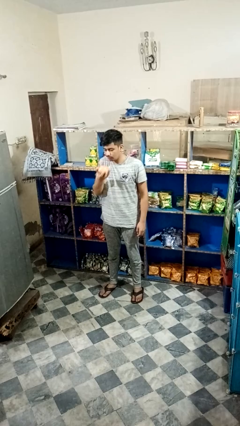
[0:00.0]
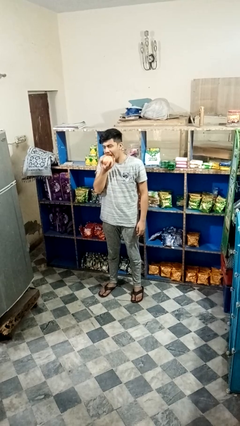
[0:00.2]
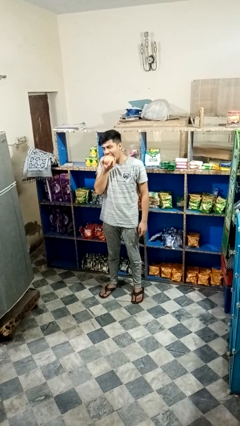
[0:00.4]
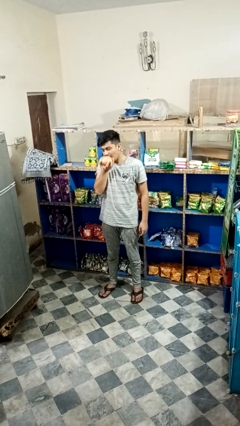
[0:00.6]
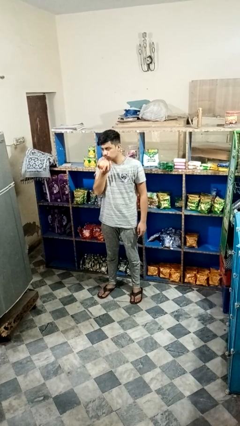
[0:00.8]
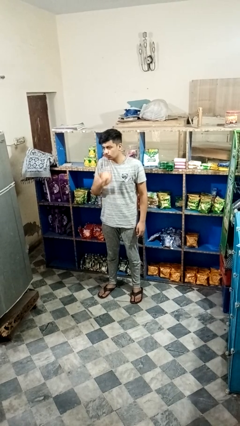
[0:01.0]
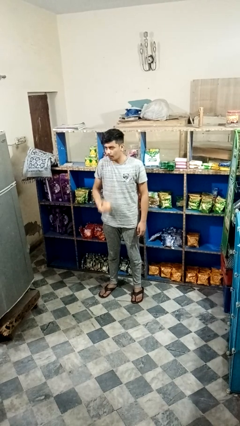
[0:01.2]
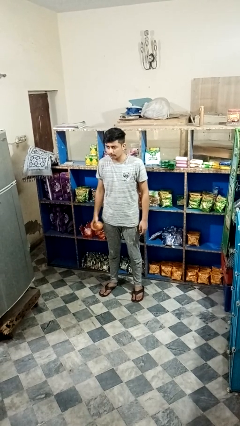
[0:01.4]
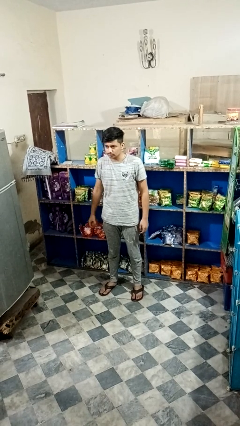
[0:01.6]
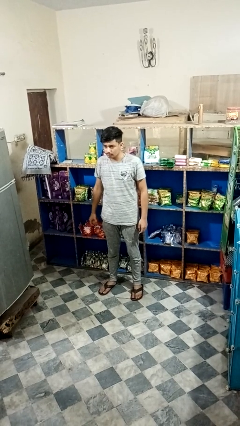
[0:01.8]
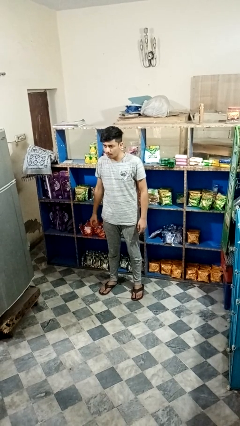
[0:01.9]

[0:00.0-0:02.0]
person eats apple

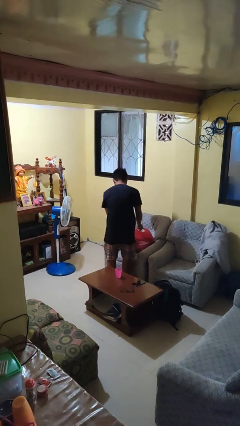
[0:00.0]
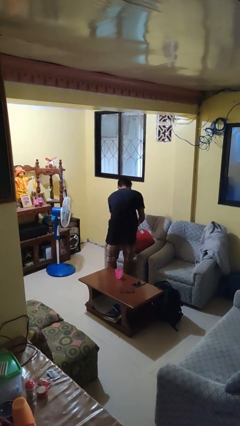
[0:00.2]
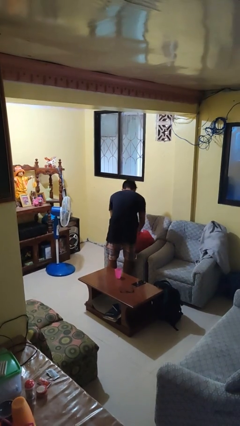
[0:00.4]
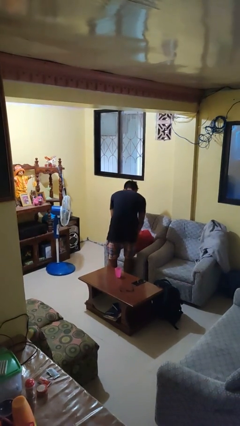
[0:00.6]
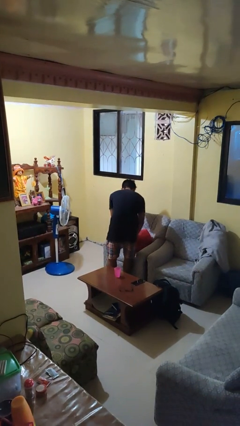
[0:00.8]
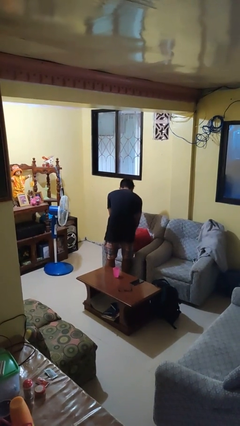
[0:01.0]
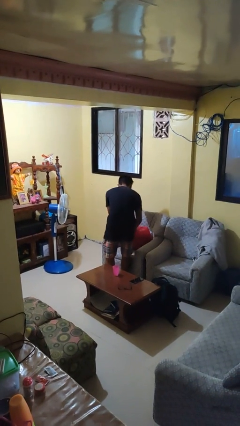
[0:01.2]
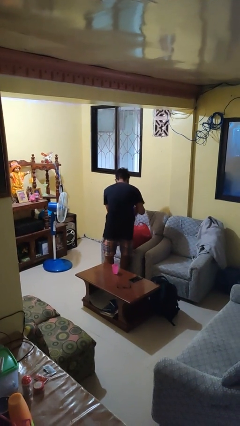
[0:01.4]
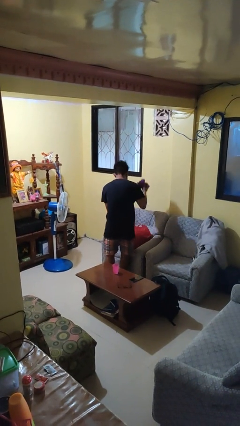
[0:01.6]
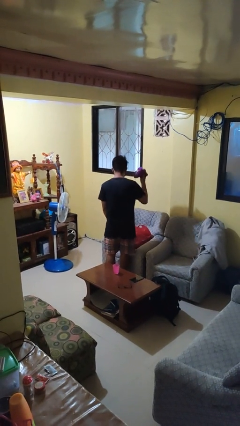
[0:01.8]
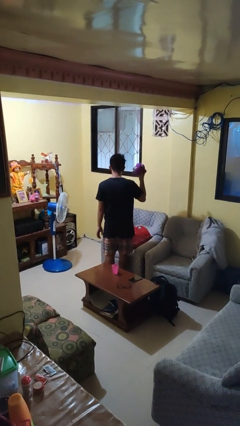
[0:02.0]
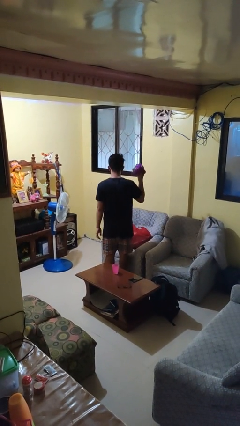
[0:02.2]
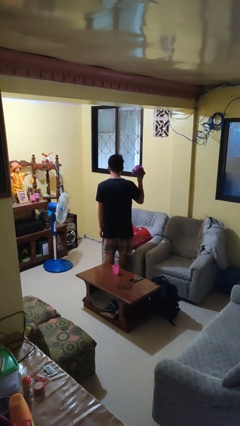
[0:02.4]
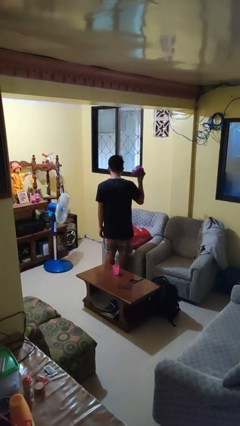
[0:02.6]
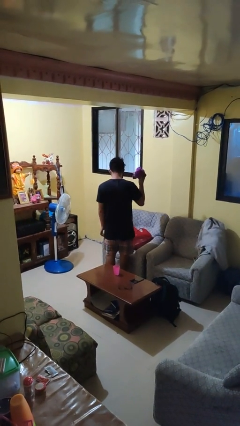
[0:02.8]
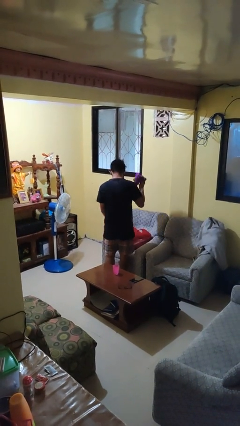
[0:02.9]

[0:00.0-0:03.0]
person takes object from bag

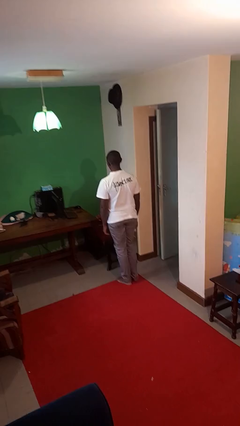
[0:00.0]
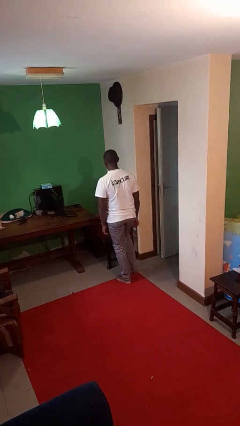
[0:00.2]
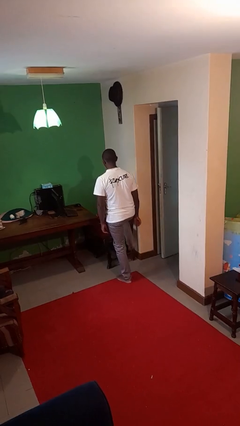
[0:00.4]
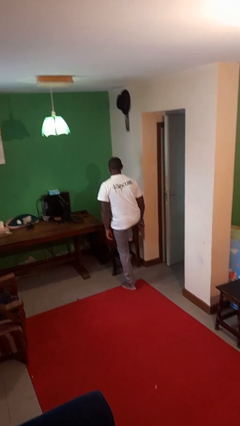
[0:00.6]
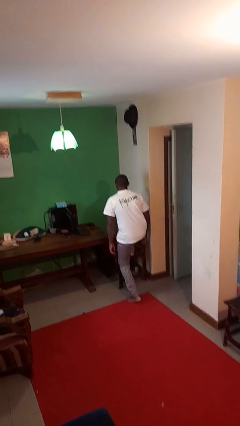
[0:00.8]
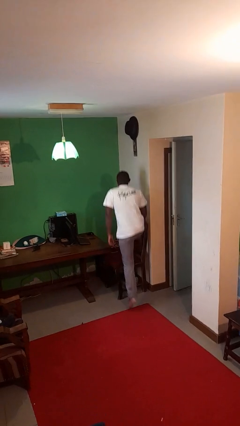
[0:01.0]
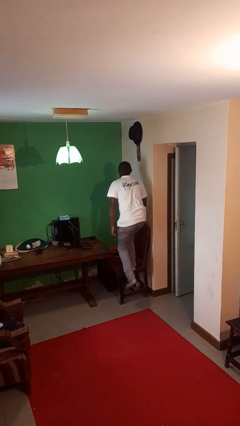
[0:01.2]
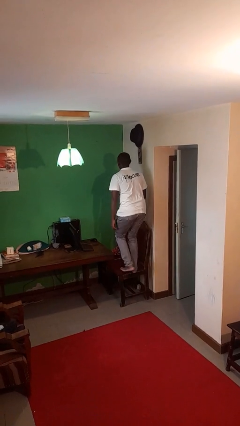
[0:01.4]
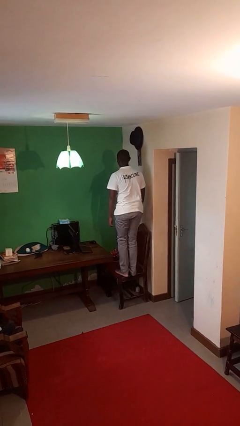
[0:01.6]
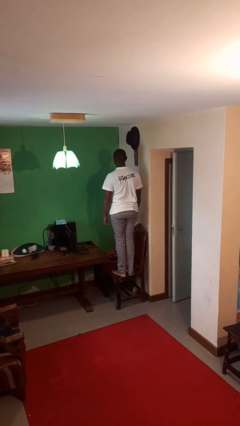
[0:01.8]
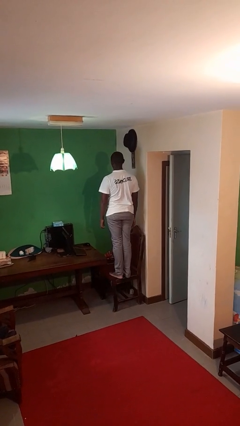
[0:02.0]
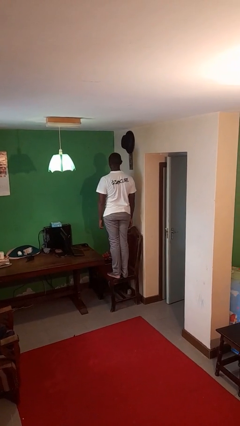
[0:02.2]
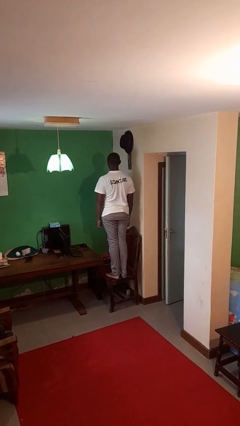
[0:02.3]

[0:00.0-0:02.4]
person climbs on chair

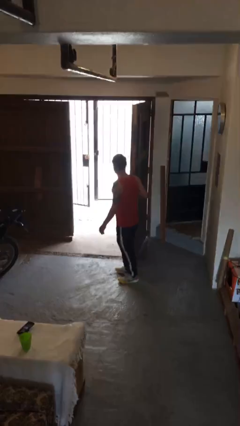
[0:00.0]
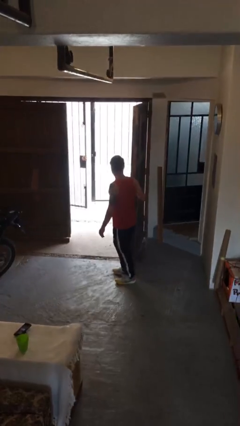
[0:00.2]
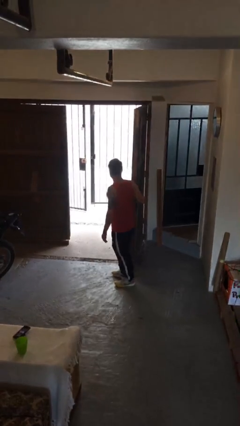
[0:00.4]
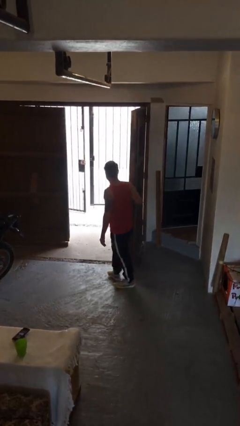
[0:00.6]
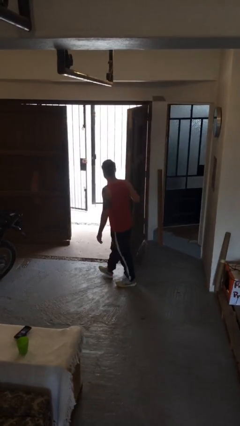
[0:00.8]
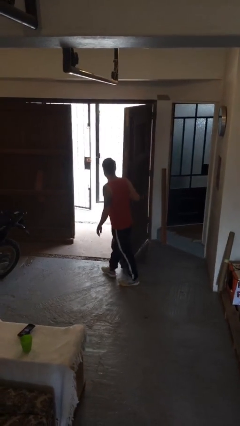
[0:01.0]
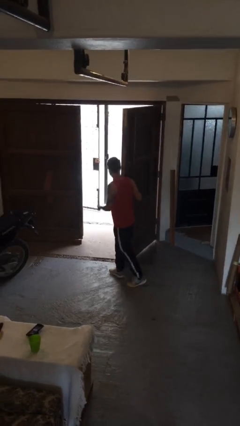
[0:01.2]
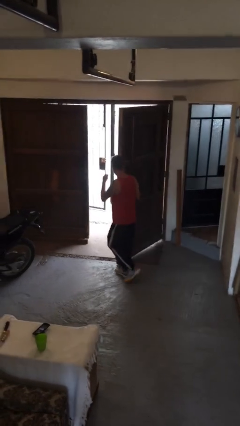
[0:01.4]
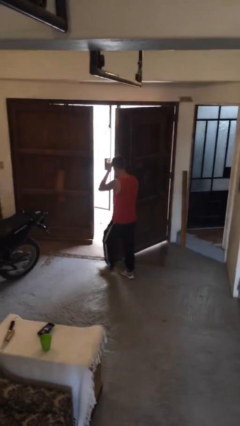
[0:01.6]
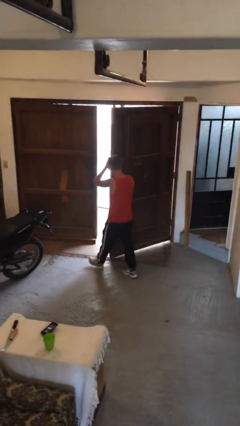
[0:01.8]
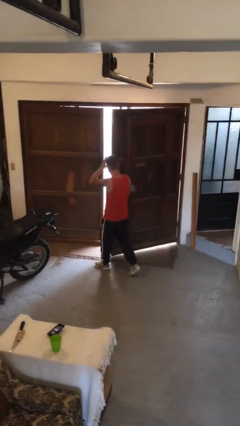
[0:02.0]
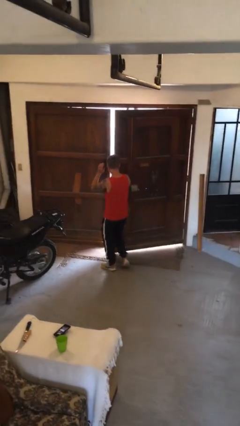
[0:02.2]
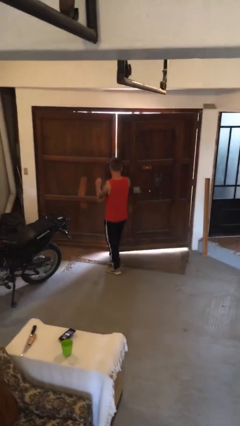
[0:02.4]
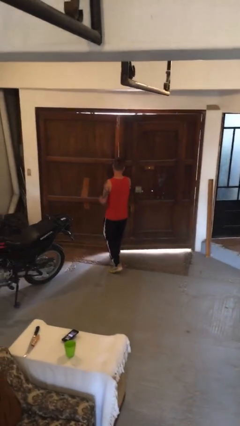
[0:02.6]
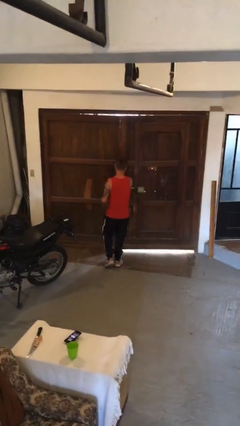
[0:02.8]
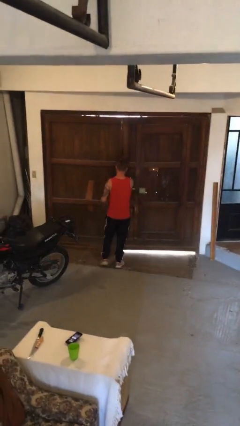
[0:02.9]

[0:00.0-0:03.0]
person closes gate

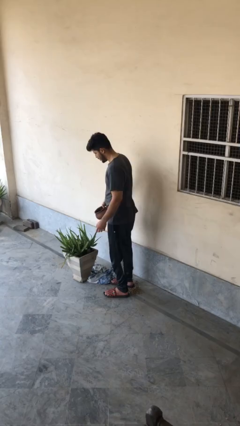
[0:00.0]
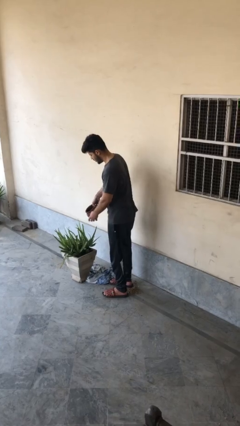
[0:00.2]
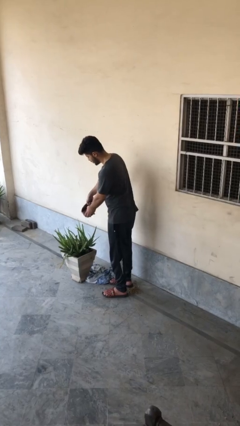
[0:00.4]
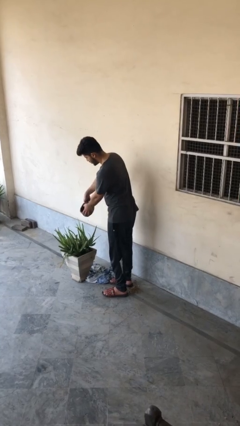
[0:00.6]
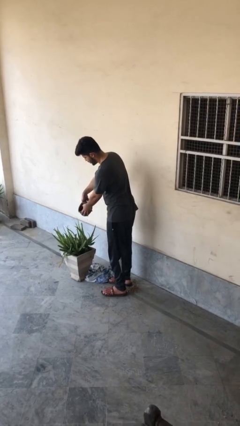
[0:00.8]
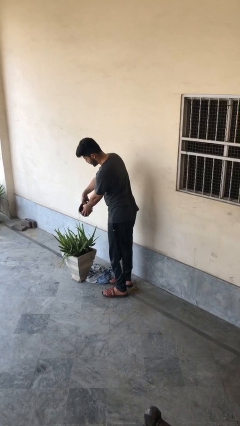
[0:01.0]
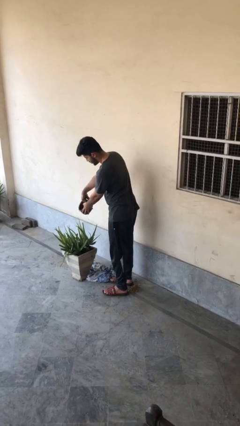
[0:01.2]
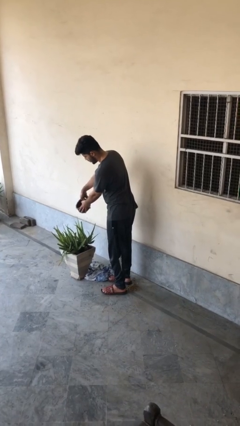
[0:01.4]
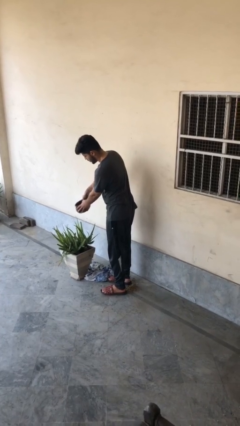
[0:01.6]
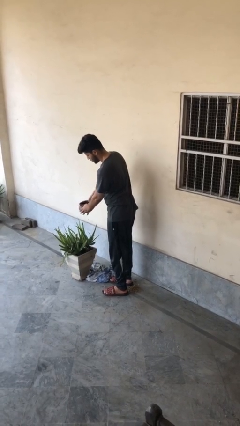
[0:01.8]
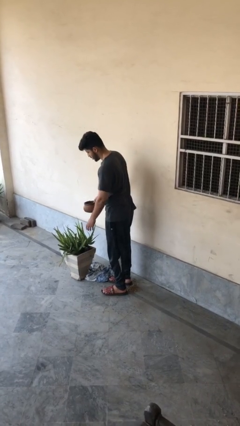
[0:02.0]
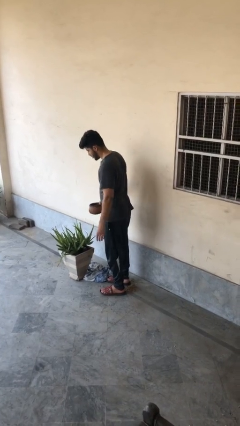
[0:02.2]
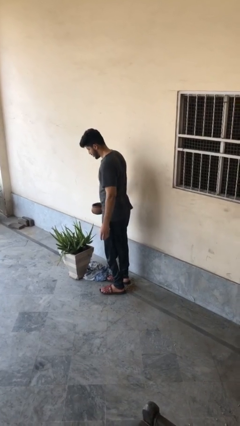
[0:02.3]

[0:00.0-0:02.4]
person waters houseplant

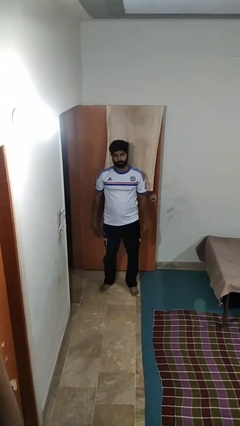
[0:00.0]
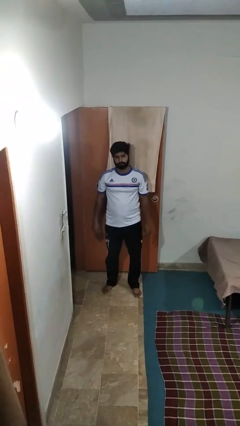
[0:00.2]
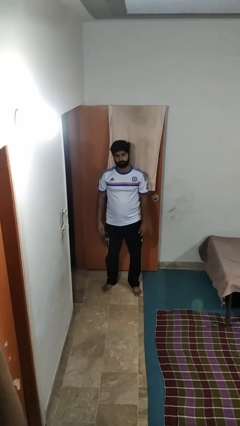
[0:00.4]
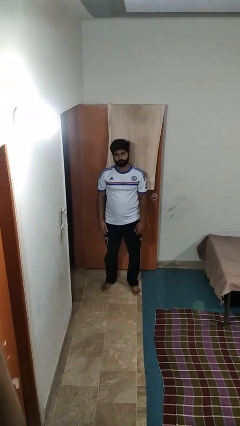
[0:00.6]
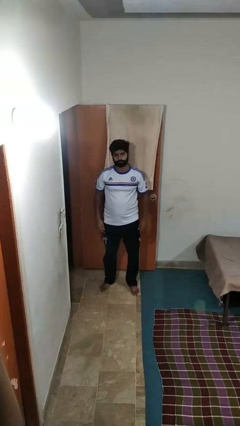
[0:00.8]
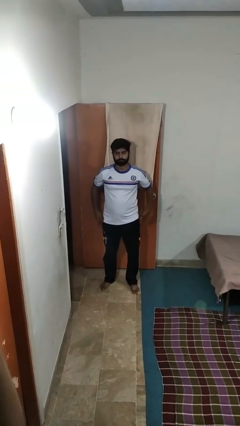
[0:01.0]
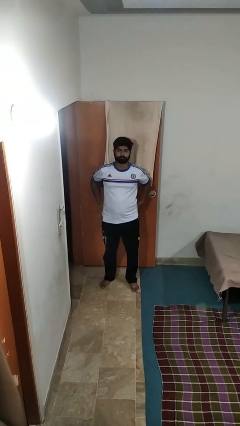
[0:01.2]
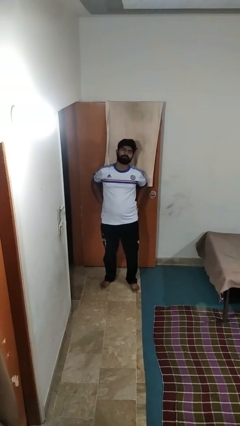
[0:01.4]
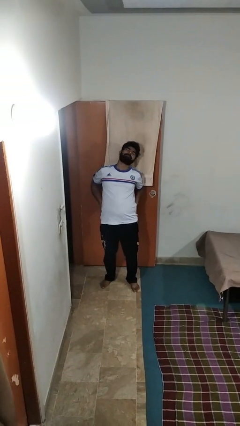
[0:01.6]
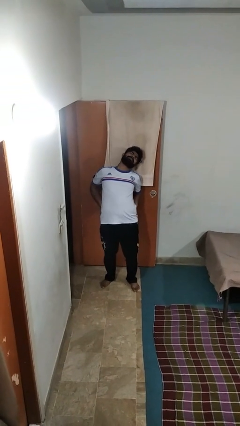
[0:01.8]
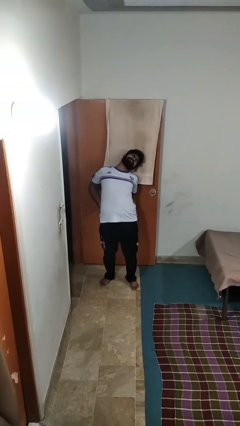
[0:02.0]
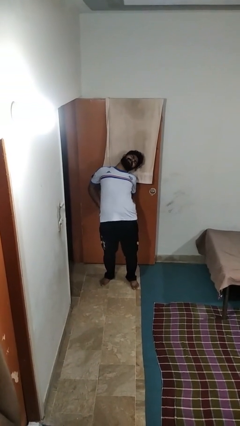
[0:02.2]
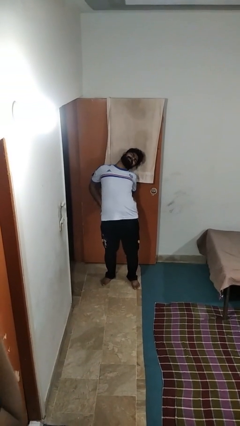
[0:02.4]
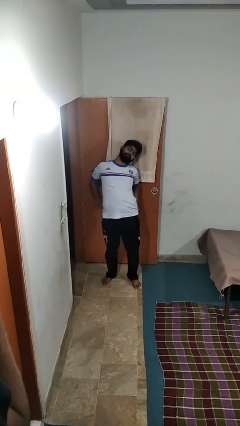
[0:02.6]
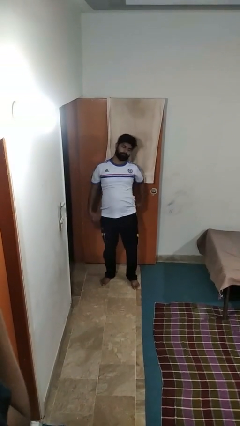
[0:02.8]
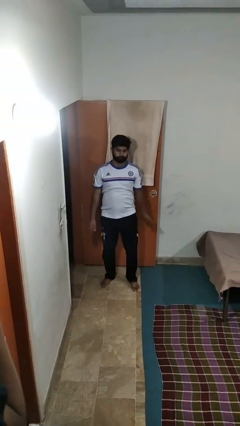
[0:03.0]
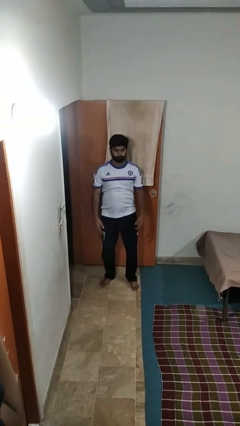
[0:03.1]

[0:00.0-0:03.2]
person stretches back

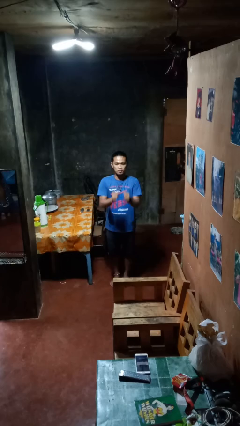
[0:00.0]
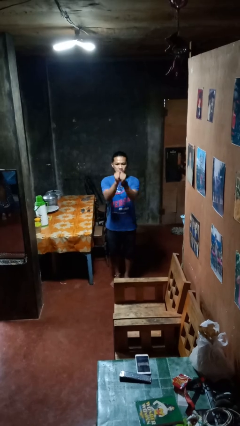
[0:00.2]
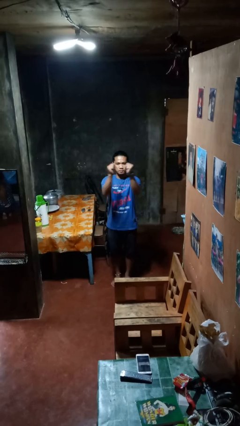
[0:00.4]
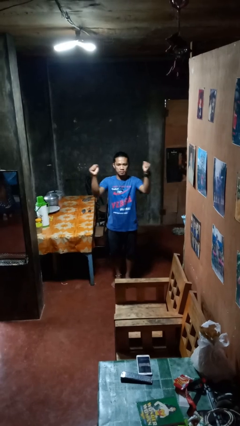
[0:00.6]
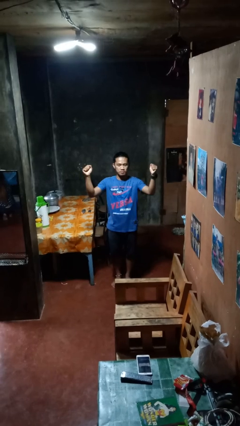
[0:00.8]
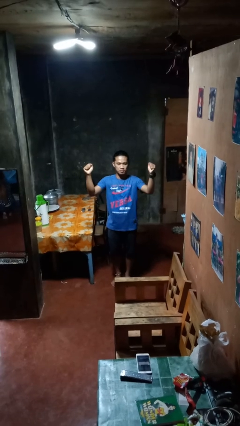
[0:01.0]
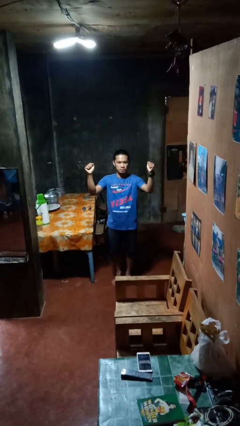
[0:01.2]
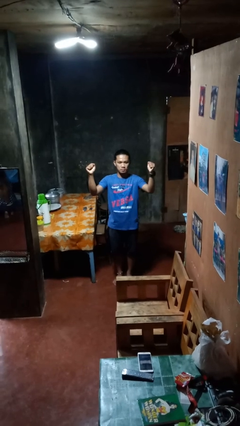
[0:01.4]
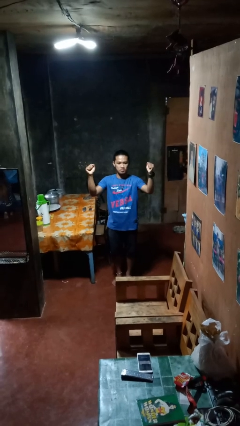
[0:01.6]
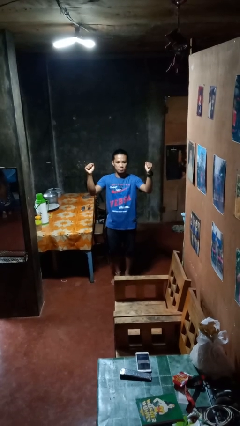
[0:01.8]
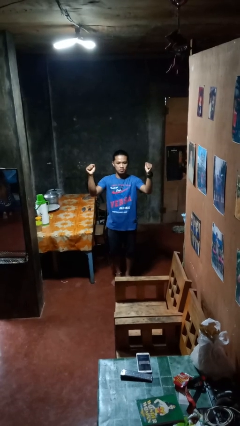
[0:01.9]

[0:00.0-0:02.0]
person gestures zoom in
